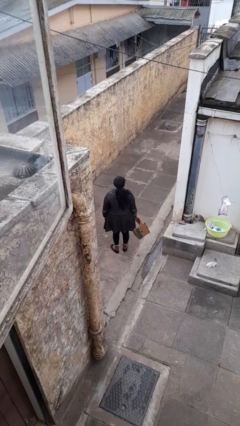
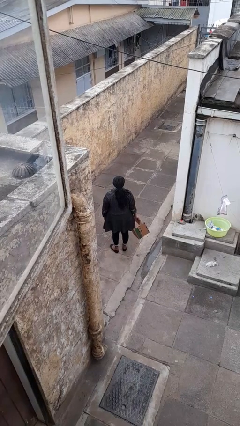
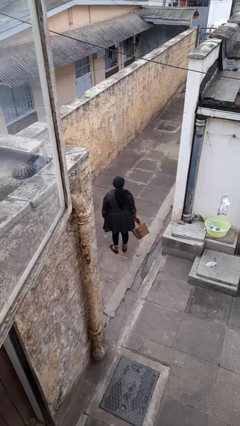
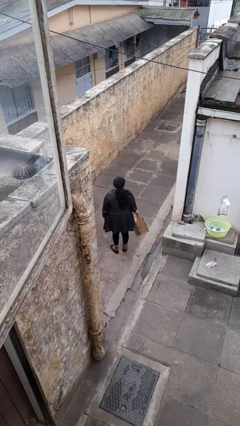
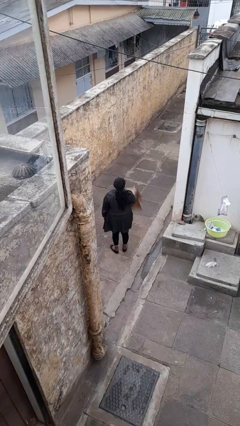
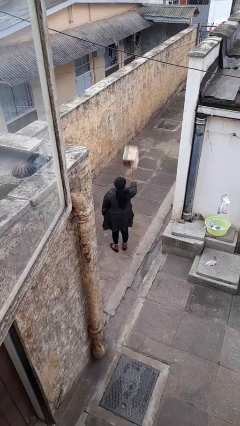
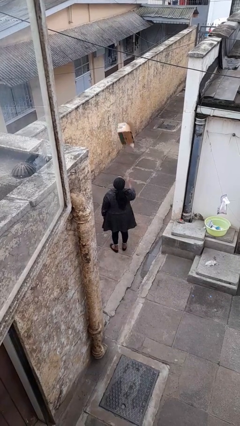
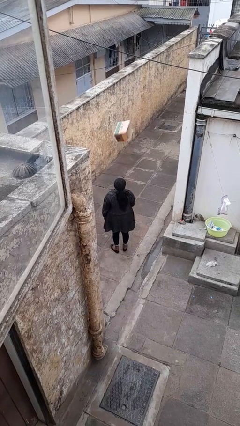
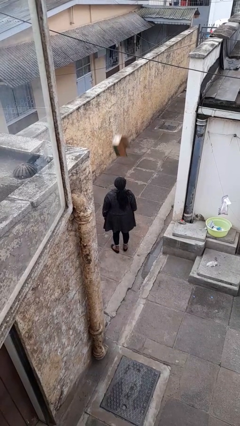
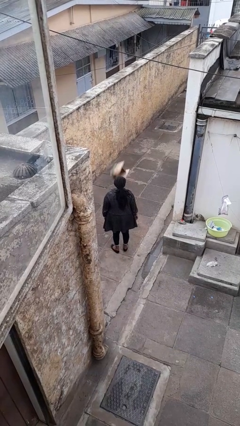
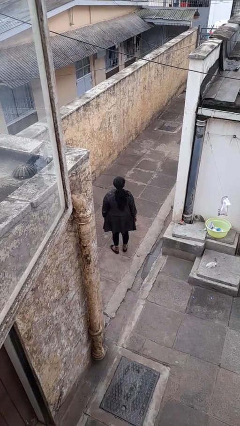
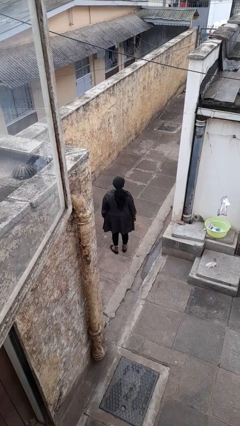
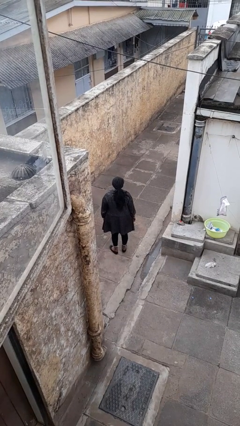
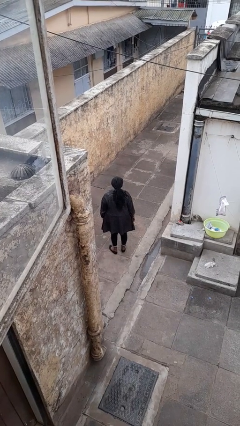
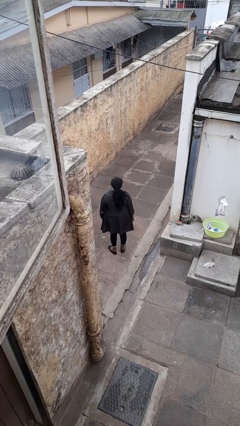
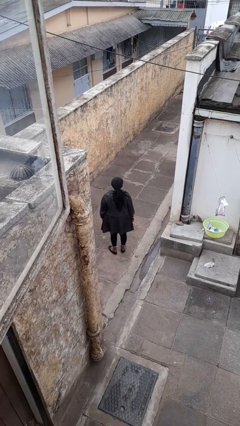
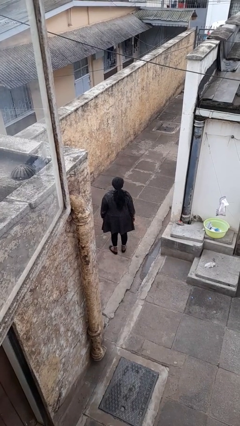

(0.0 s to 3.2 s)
person throws object into air

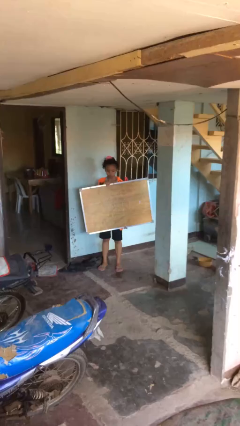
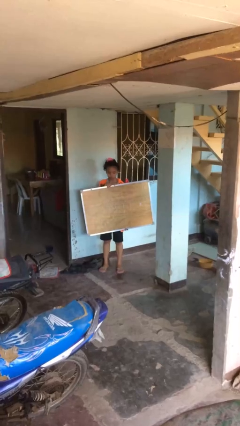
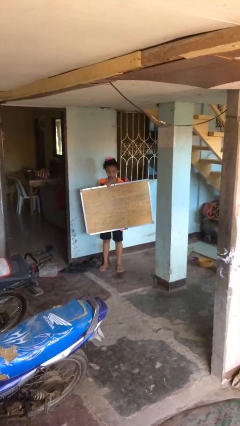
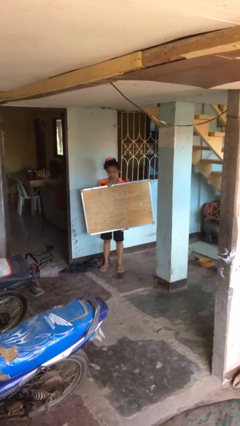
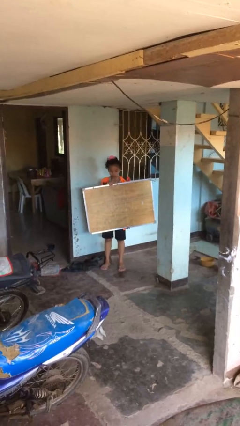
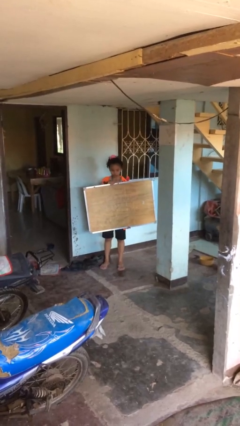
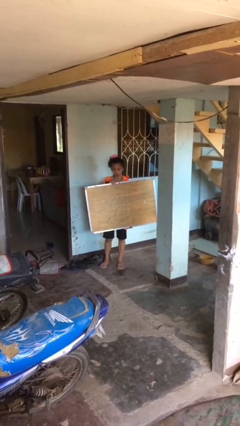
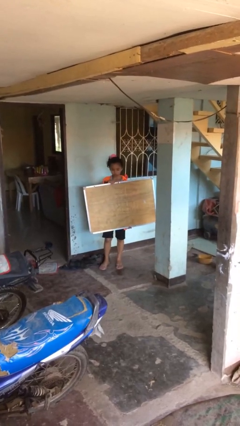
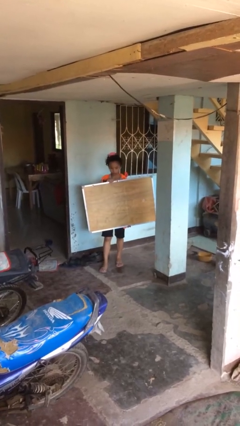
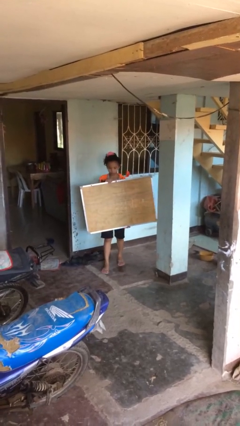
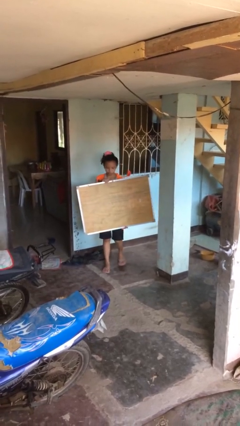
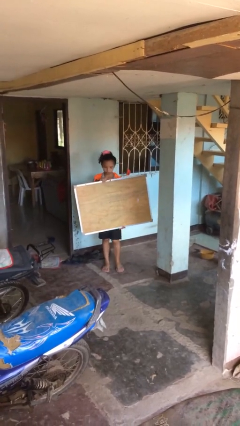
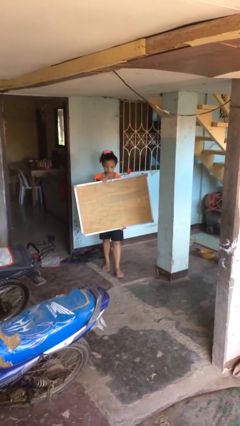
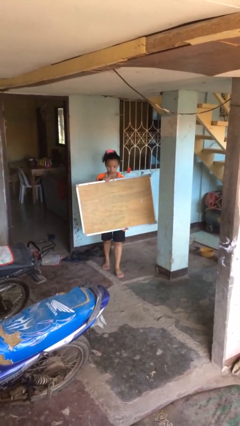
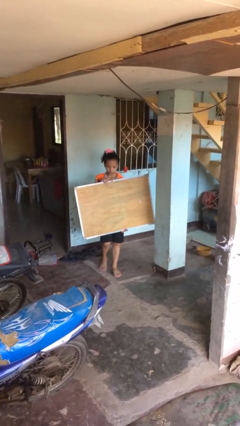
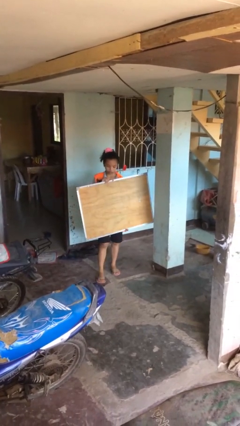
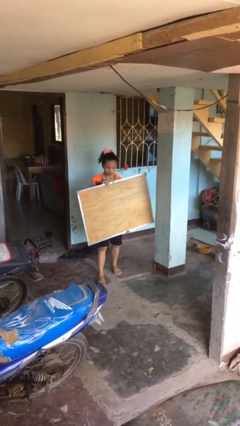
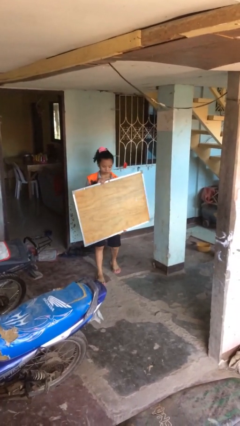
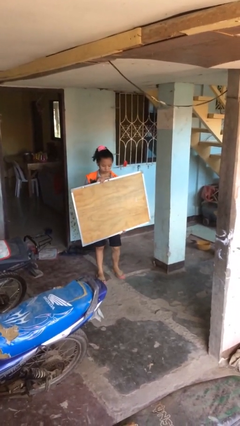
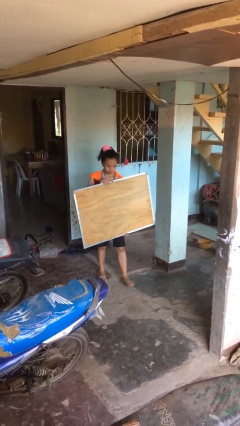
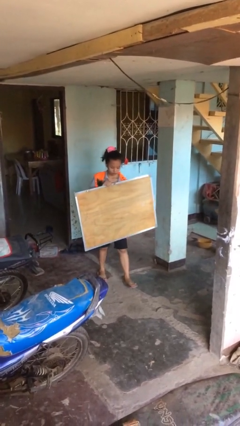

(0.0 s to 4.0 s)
person carries heavy object

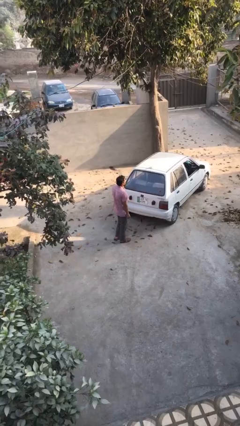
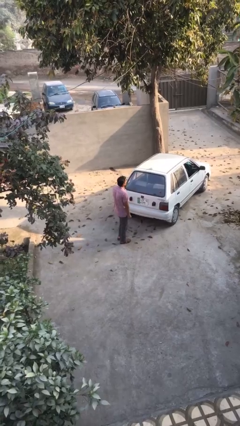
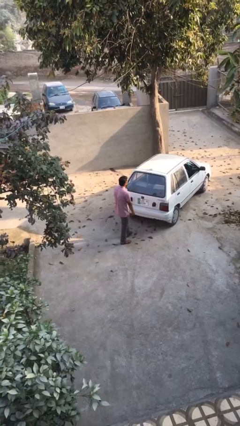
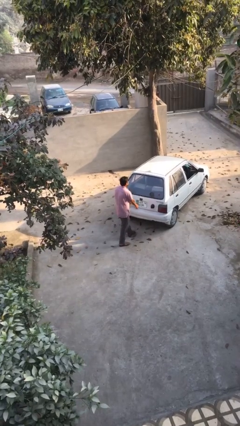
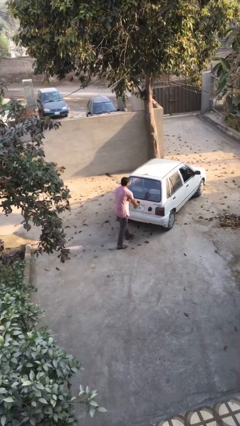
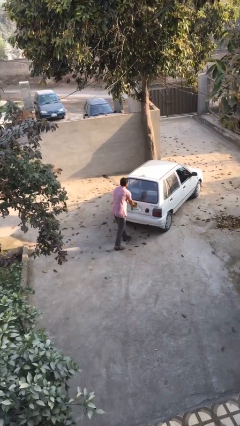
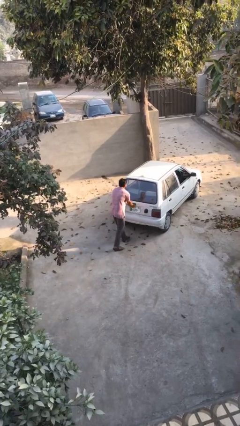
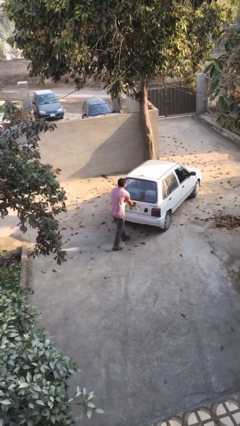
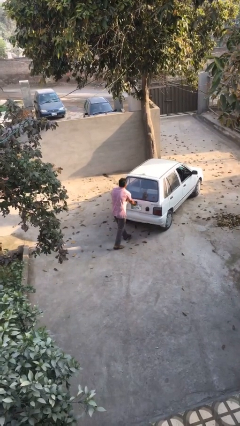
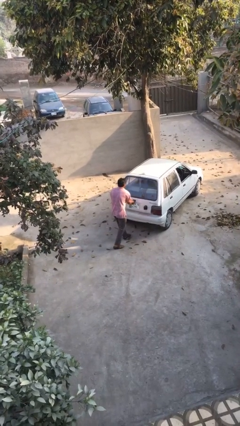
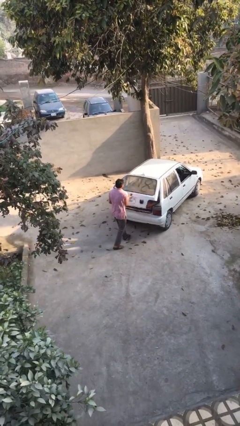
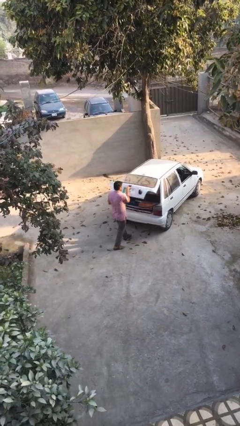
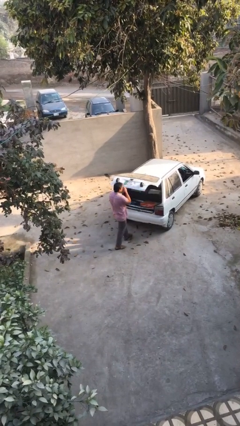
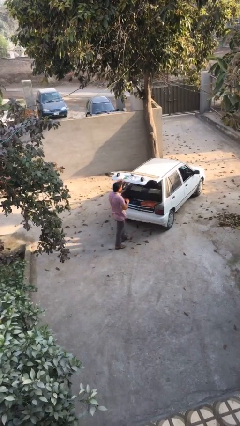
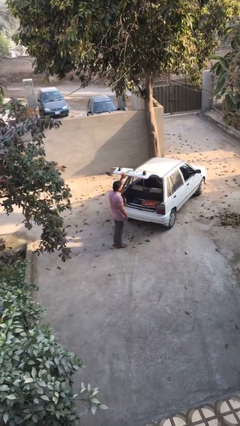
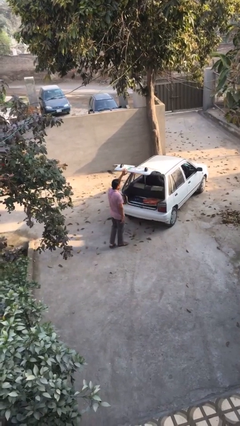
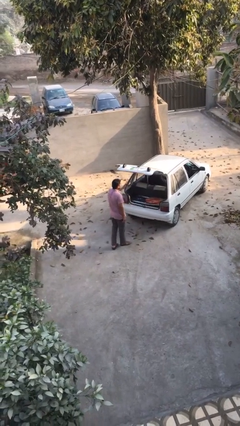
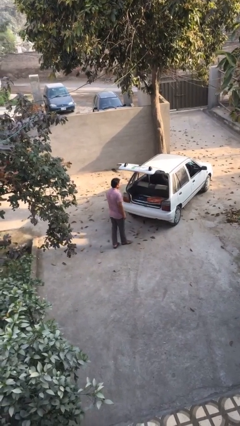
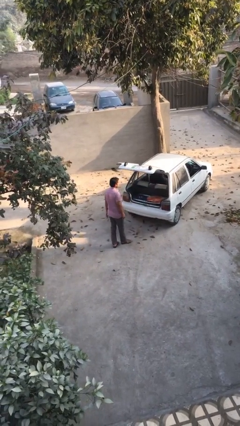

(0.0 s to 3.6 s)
person opens car trunk

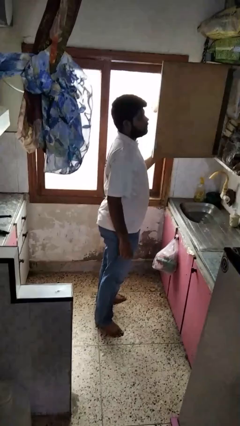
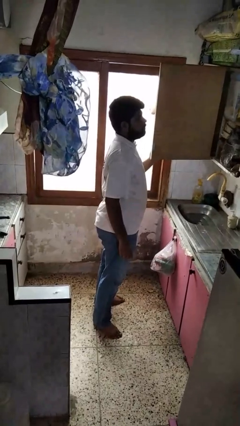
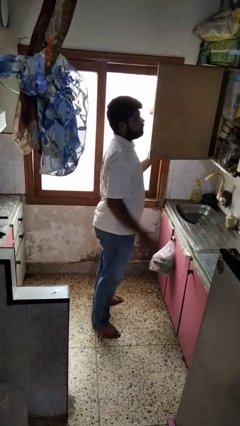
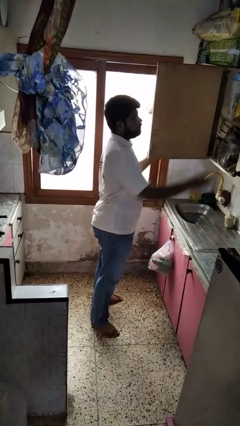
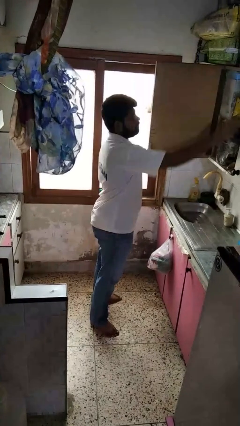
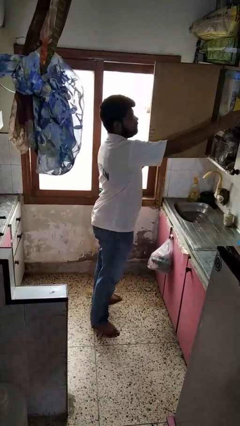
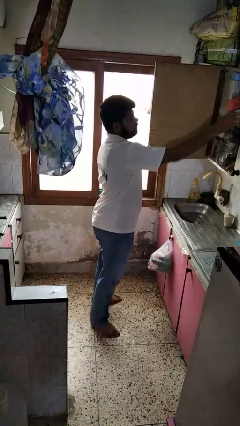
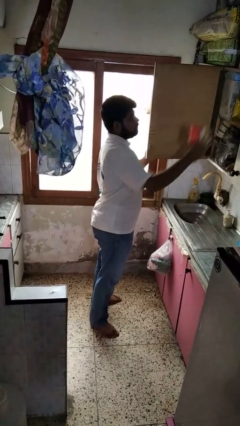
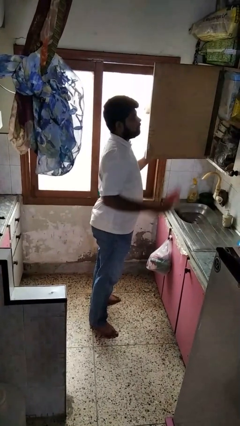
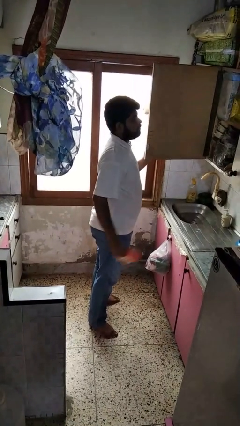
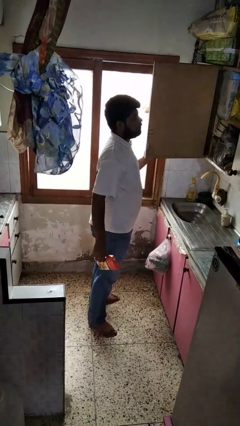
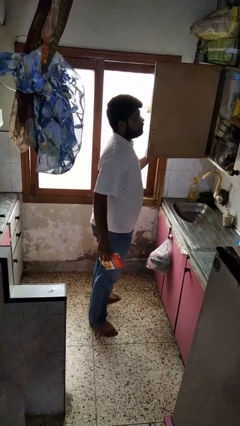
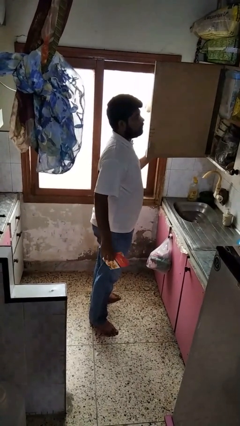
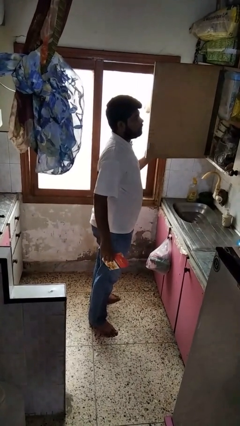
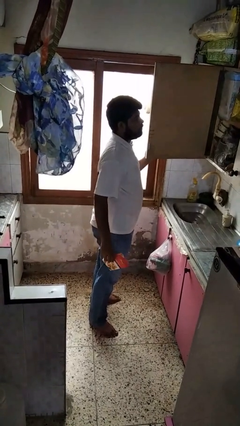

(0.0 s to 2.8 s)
person picks up object from cabinet

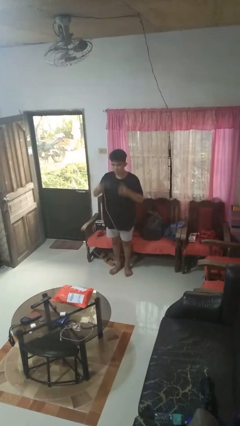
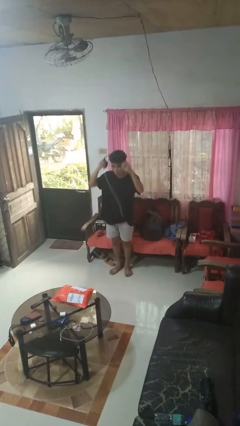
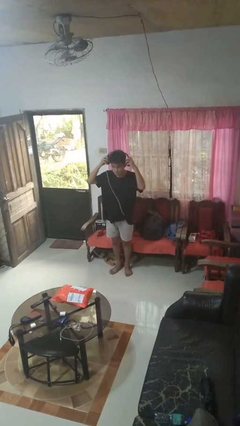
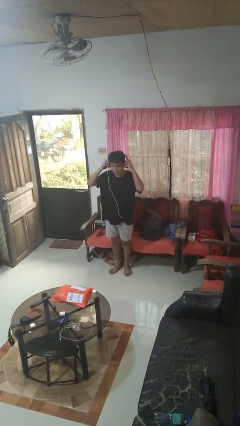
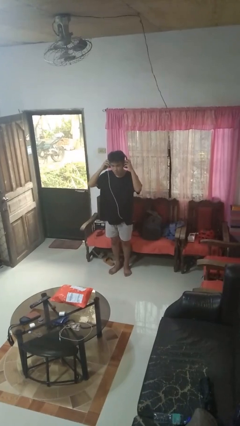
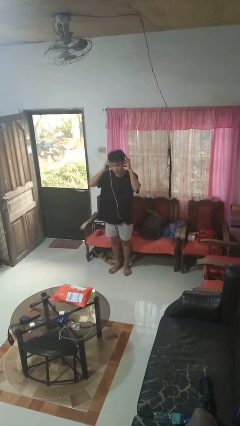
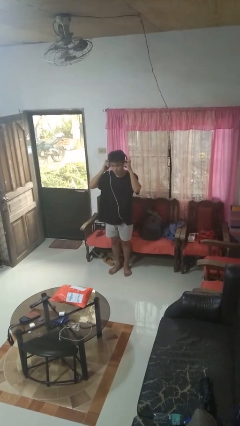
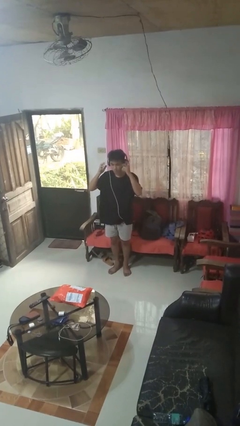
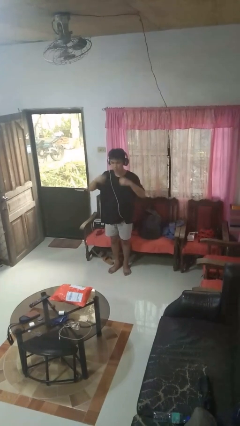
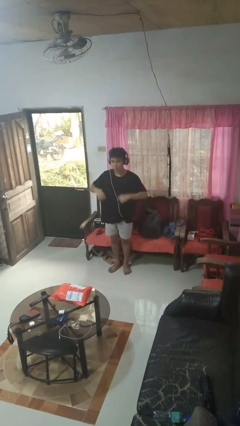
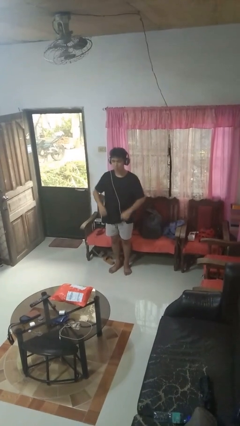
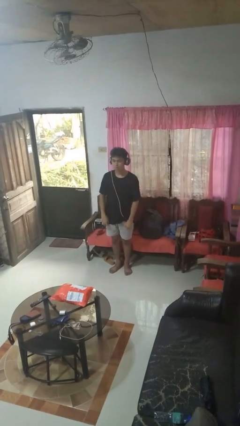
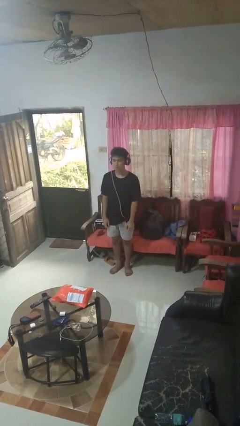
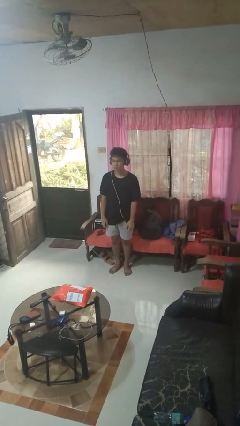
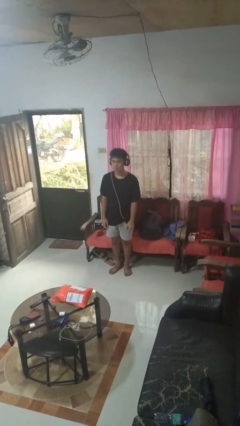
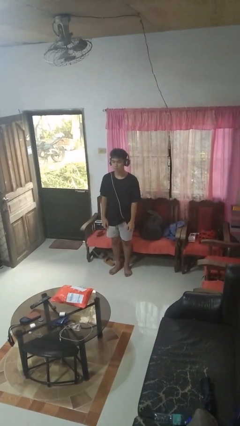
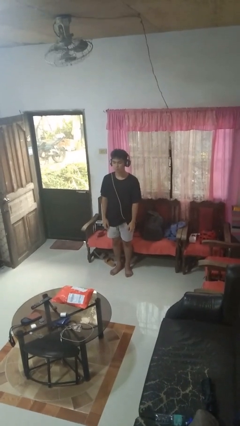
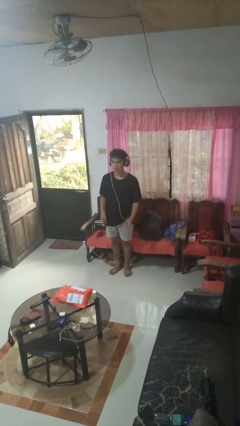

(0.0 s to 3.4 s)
person puts on headphones
